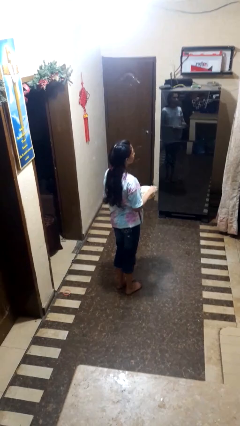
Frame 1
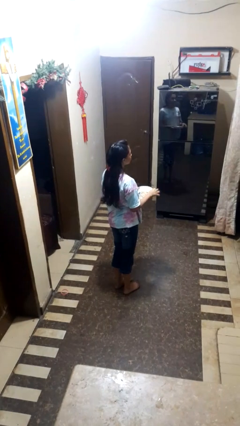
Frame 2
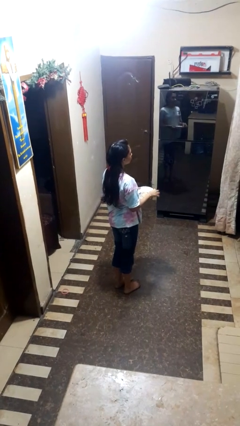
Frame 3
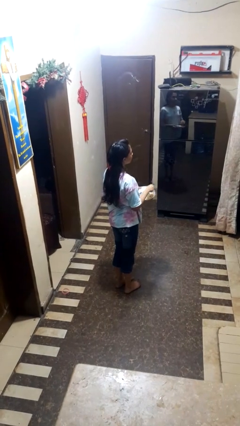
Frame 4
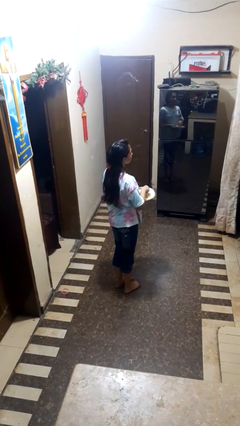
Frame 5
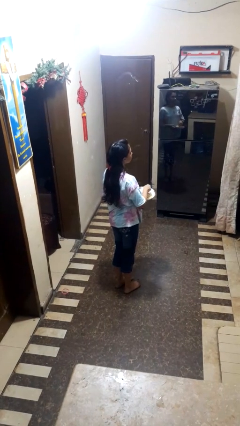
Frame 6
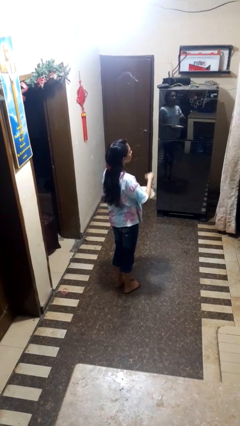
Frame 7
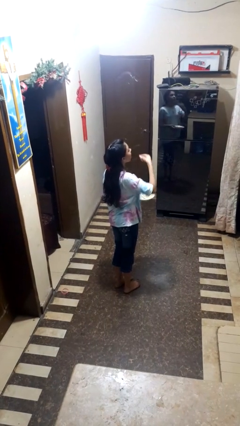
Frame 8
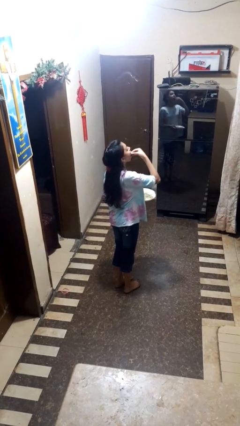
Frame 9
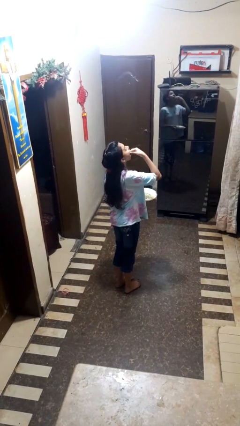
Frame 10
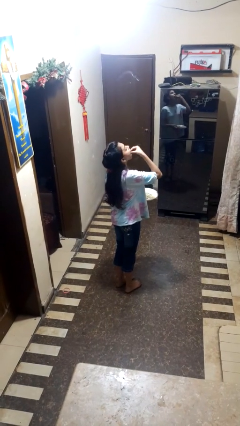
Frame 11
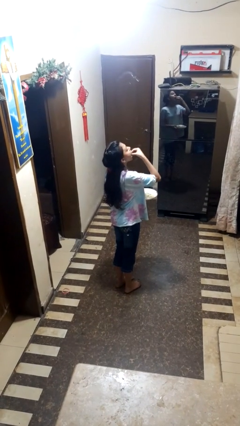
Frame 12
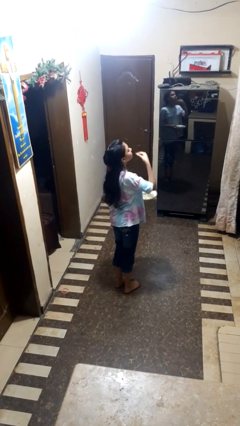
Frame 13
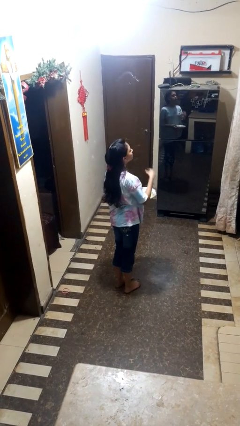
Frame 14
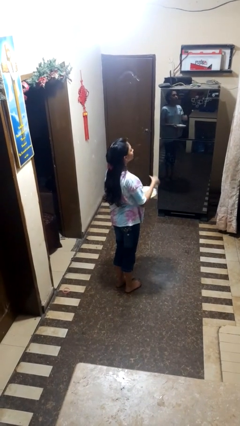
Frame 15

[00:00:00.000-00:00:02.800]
person eats with hands

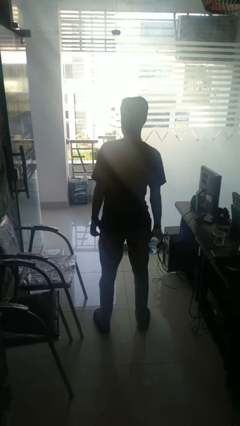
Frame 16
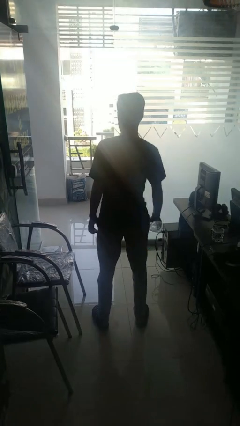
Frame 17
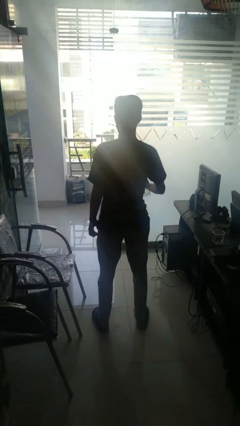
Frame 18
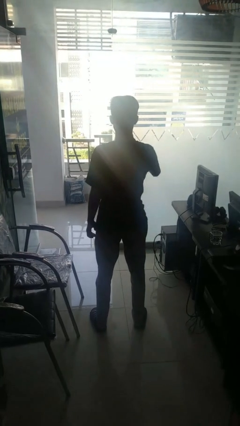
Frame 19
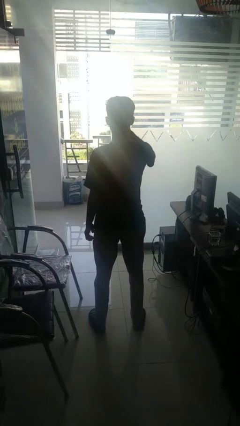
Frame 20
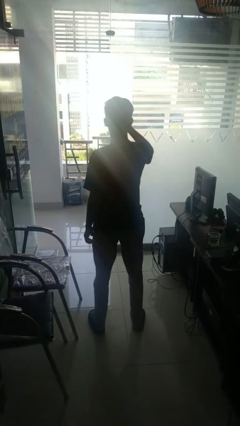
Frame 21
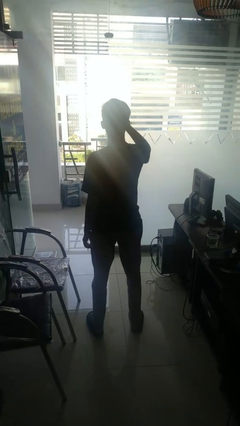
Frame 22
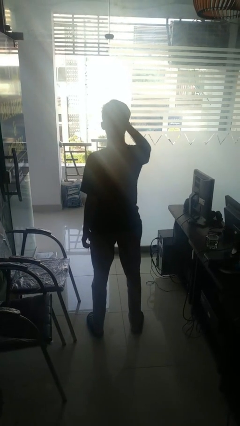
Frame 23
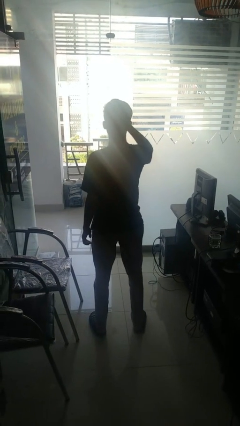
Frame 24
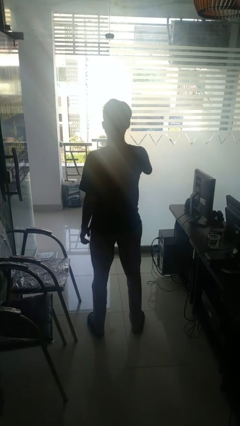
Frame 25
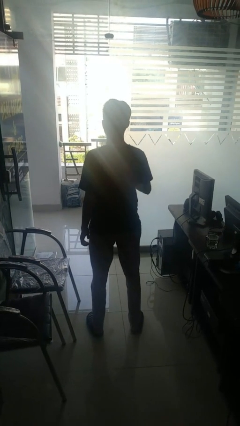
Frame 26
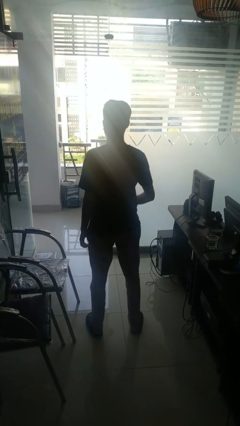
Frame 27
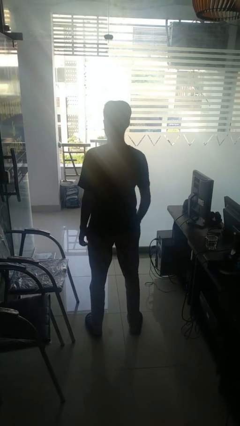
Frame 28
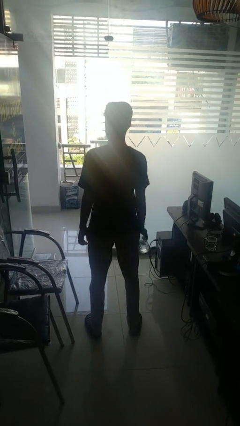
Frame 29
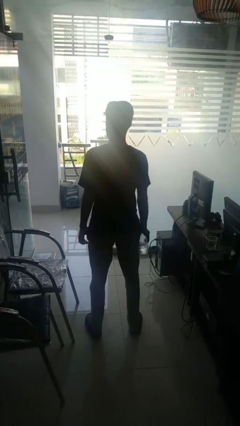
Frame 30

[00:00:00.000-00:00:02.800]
person drinks from bottle

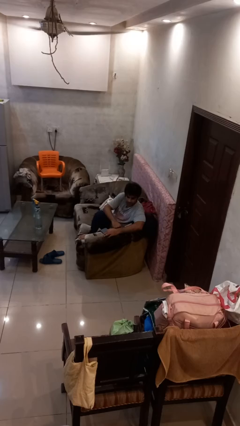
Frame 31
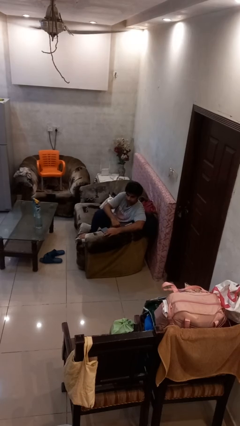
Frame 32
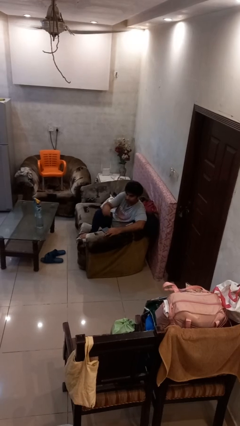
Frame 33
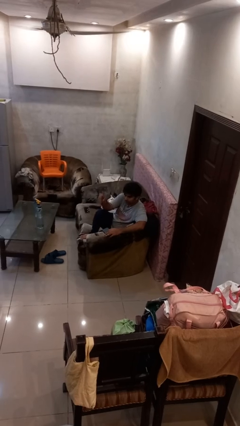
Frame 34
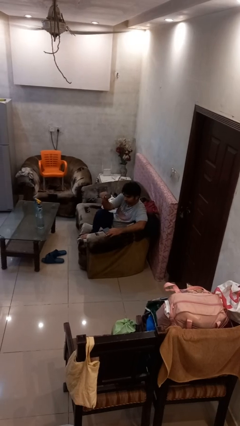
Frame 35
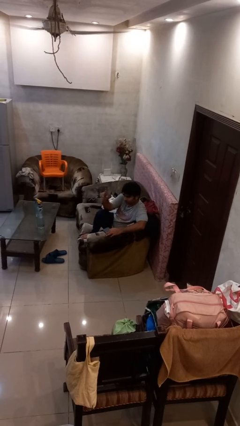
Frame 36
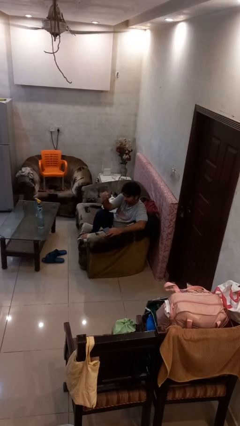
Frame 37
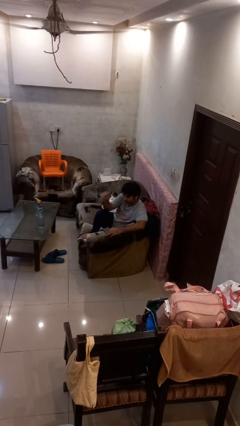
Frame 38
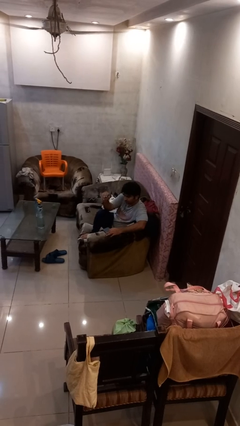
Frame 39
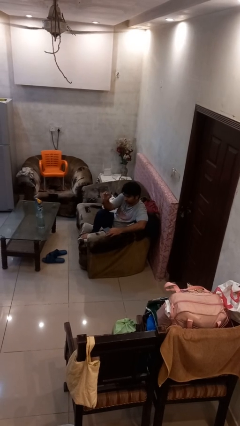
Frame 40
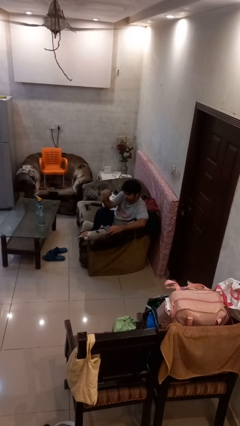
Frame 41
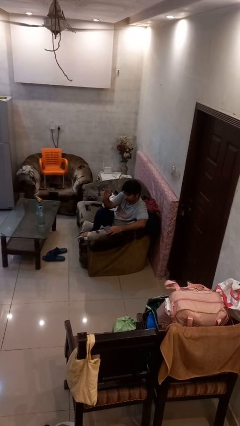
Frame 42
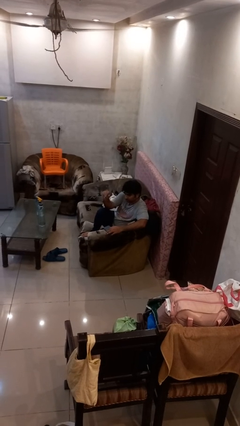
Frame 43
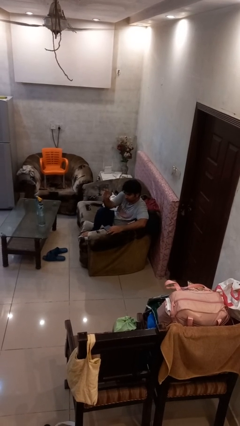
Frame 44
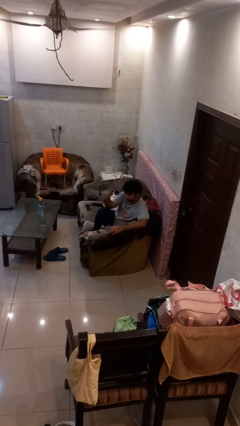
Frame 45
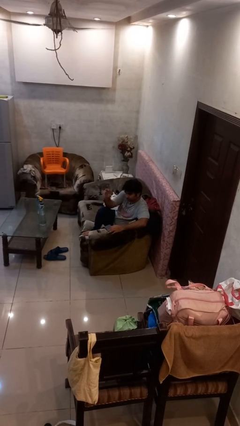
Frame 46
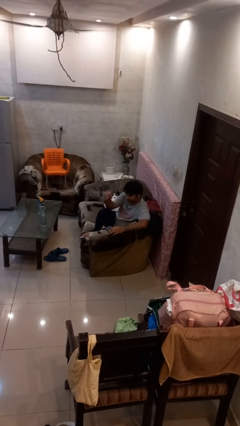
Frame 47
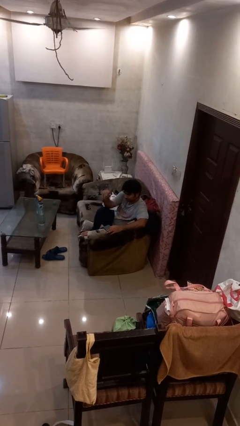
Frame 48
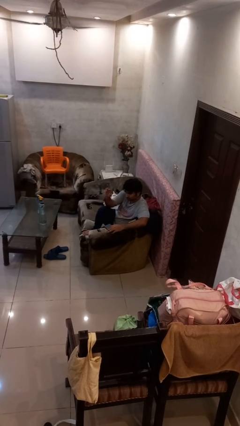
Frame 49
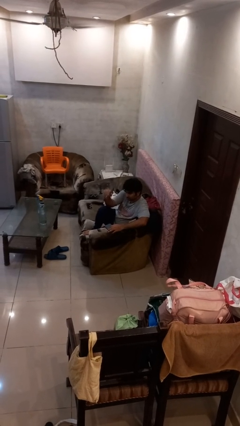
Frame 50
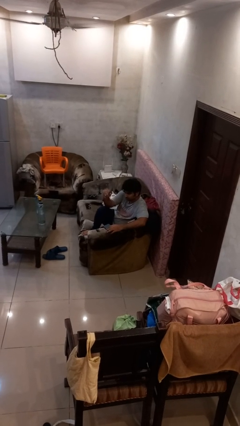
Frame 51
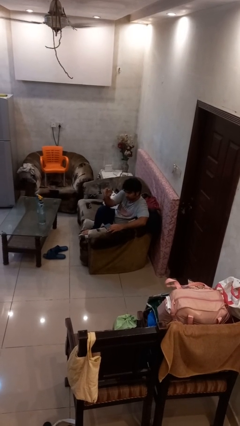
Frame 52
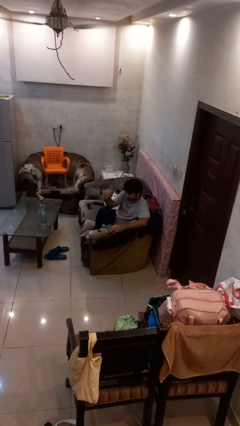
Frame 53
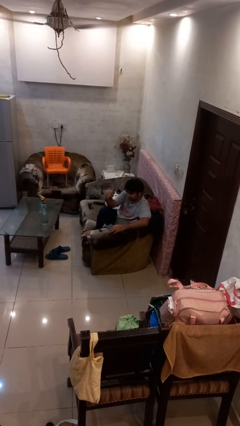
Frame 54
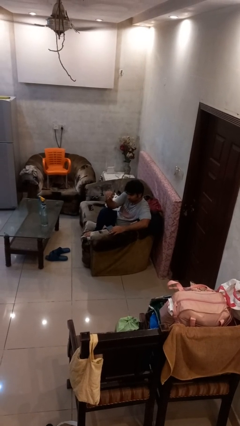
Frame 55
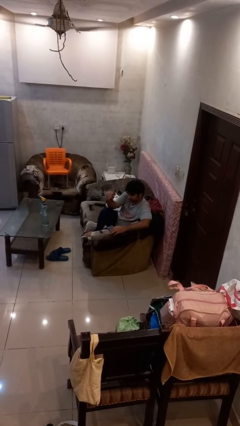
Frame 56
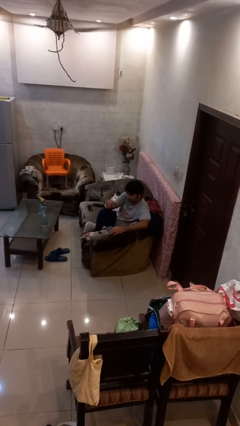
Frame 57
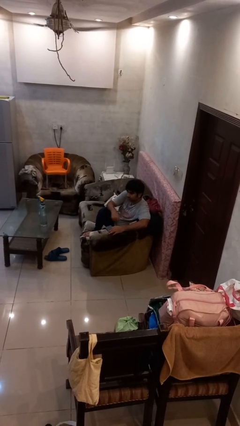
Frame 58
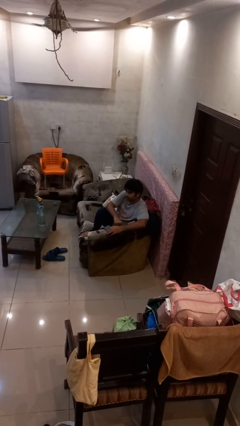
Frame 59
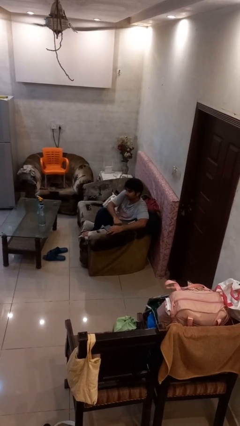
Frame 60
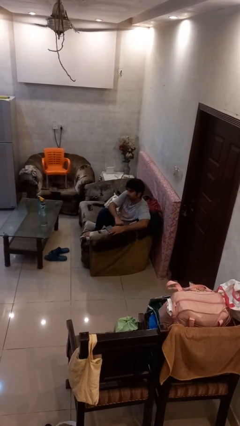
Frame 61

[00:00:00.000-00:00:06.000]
person gestures come here

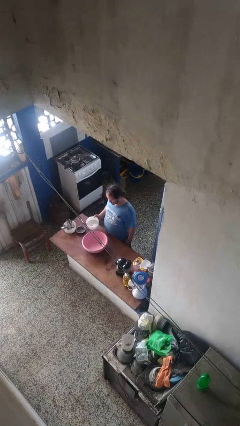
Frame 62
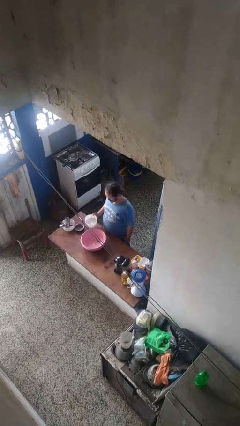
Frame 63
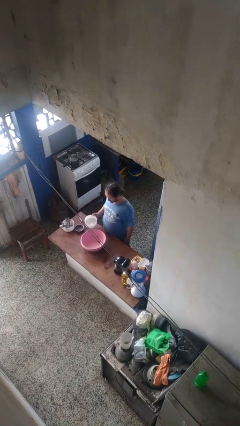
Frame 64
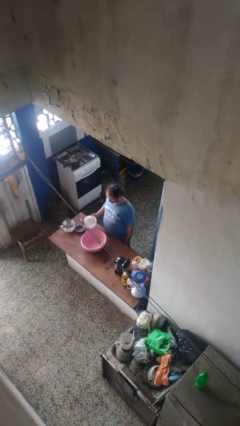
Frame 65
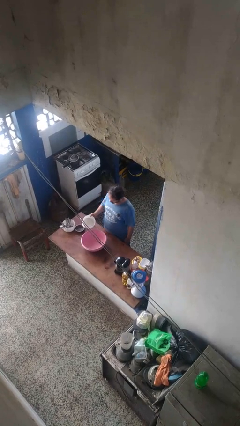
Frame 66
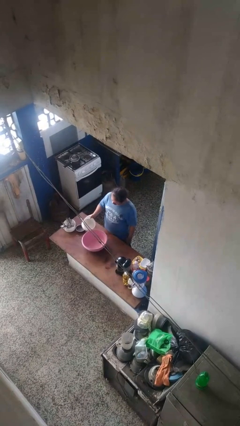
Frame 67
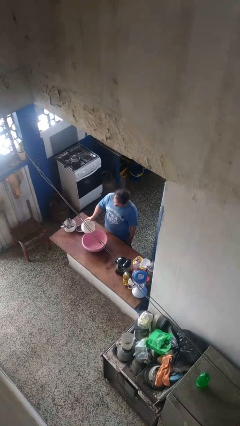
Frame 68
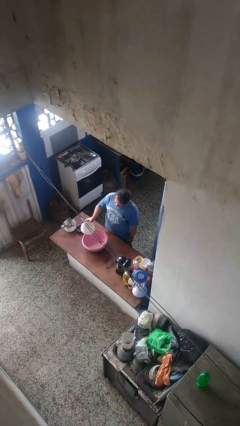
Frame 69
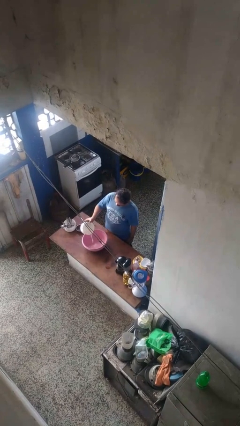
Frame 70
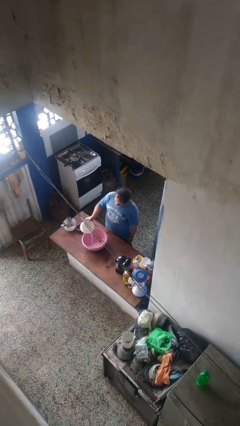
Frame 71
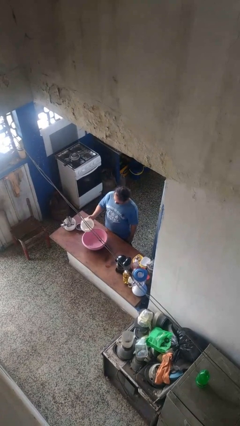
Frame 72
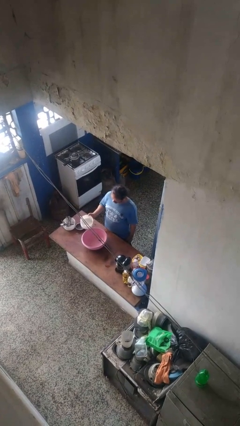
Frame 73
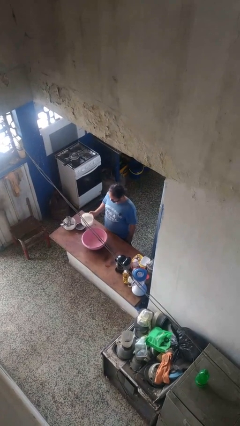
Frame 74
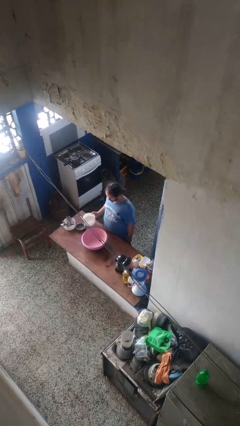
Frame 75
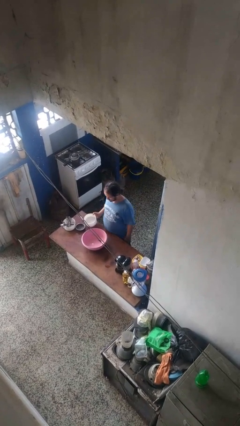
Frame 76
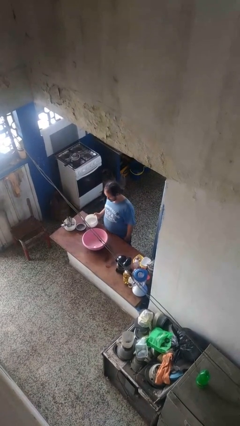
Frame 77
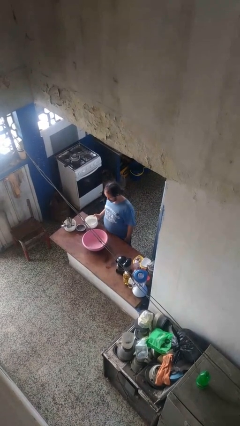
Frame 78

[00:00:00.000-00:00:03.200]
person pours into bowl

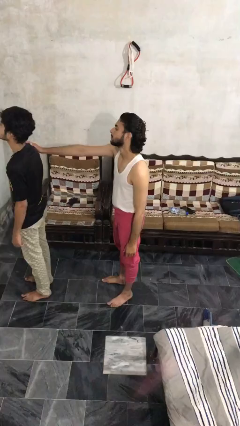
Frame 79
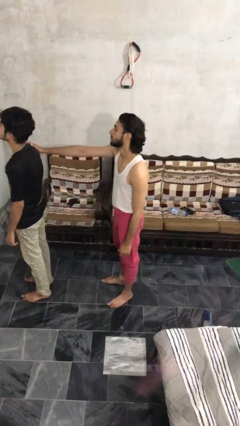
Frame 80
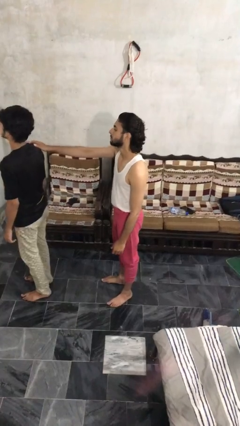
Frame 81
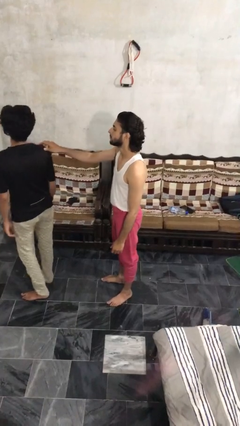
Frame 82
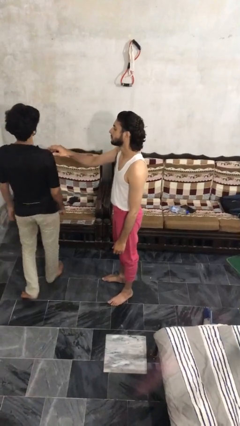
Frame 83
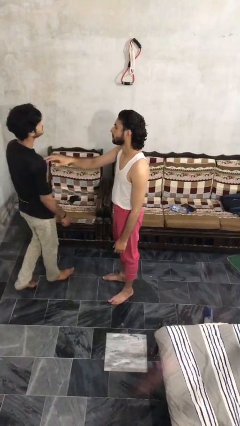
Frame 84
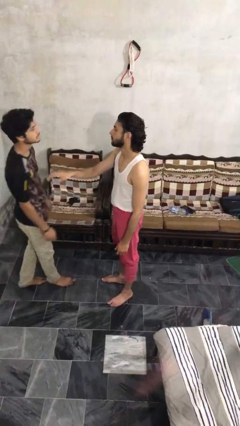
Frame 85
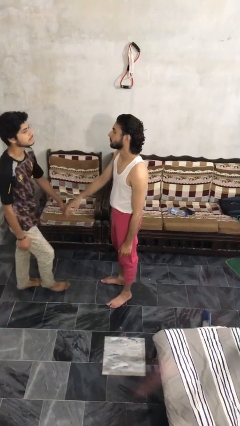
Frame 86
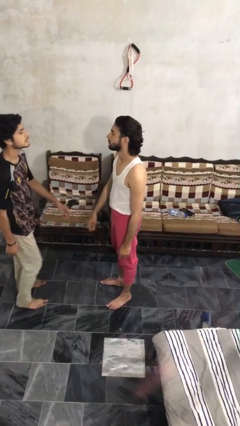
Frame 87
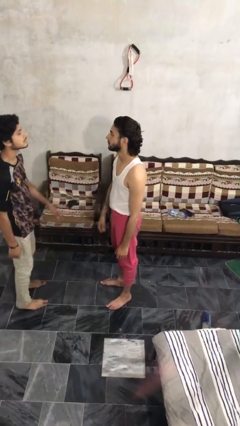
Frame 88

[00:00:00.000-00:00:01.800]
person spins person around

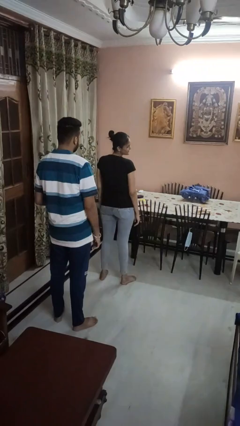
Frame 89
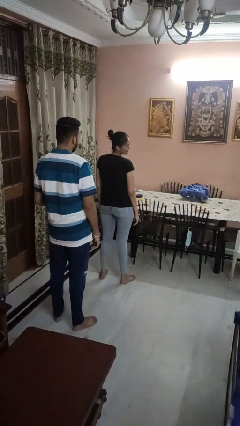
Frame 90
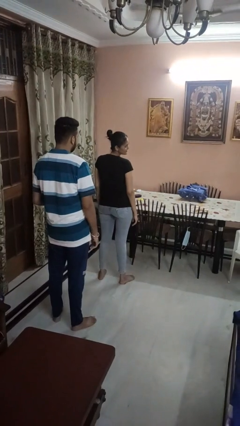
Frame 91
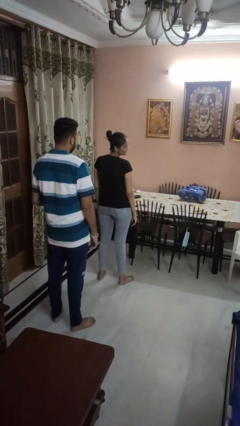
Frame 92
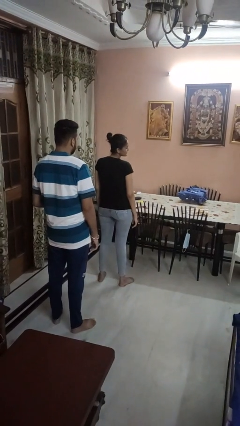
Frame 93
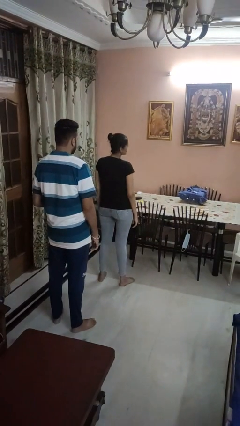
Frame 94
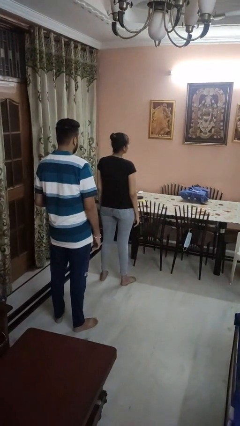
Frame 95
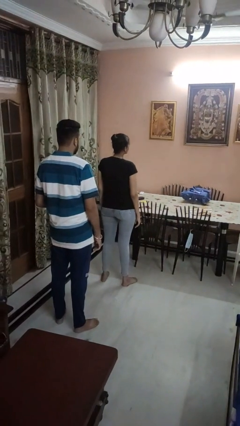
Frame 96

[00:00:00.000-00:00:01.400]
person looks over shoulder
